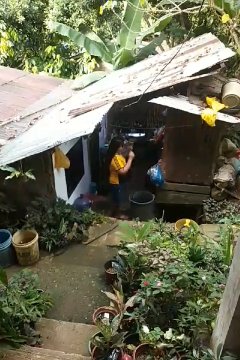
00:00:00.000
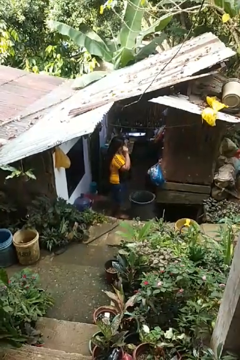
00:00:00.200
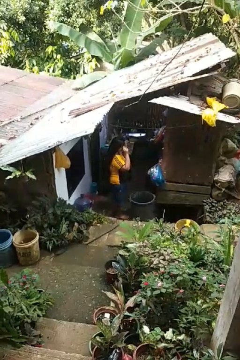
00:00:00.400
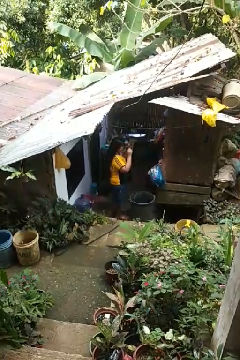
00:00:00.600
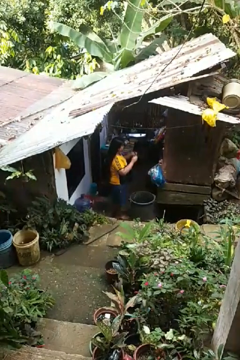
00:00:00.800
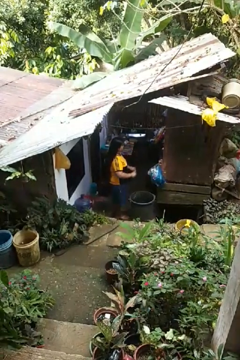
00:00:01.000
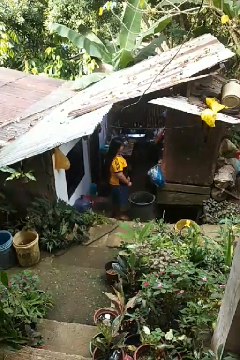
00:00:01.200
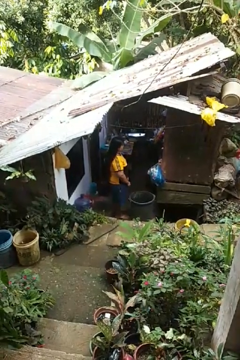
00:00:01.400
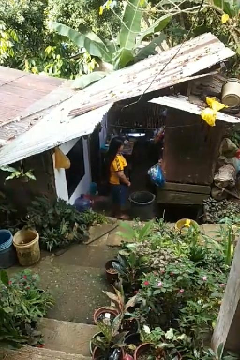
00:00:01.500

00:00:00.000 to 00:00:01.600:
person takes off sunglasses

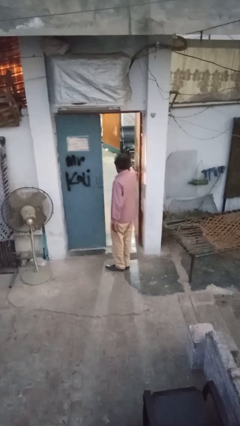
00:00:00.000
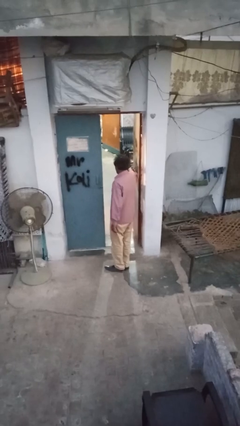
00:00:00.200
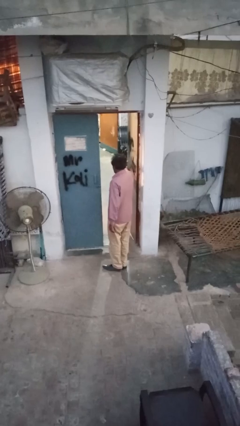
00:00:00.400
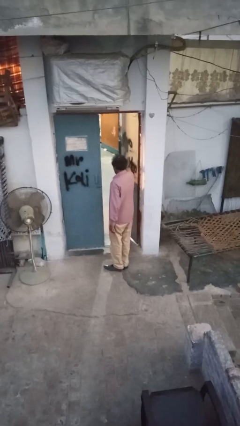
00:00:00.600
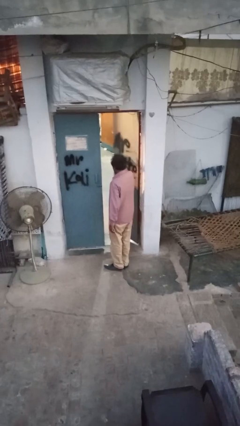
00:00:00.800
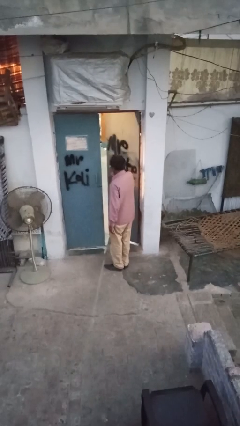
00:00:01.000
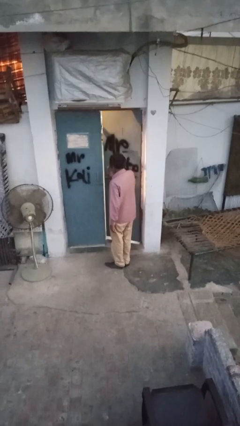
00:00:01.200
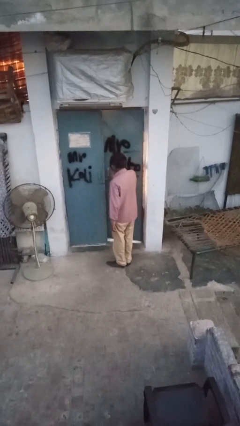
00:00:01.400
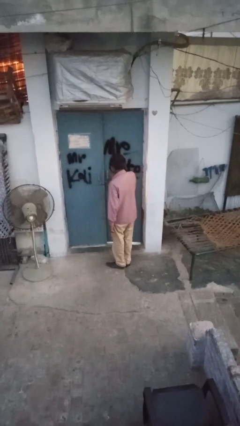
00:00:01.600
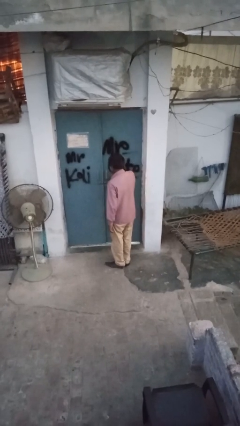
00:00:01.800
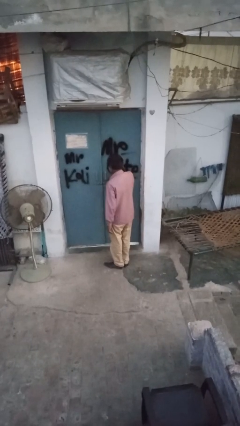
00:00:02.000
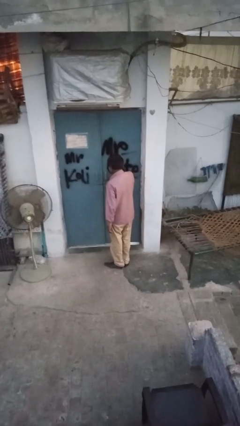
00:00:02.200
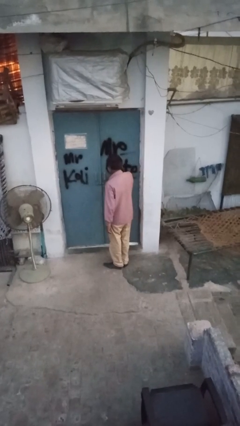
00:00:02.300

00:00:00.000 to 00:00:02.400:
person closes facility door

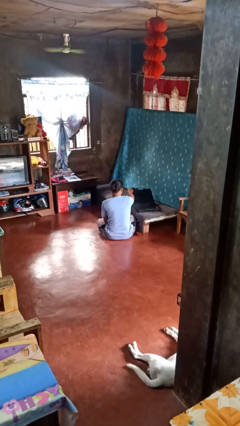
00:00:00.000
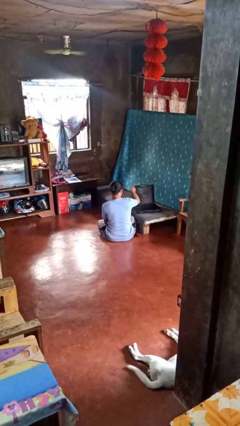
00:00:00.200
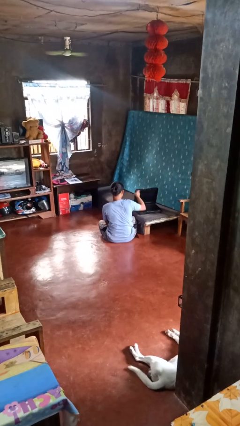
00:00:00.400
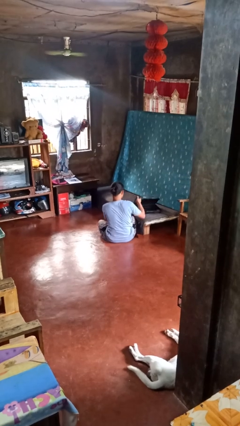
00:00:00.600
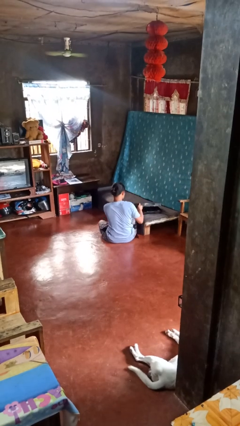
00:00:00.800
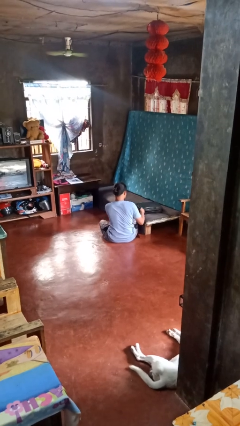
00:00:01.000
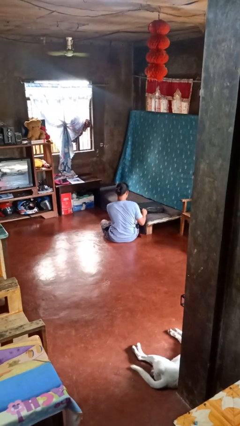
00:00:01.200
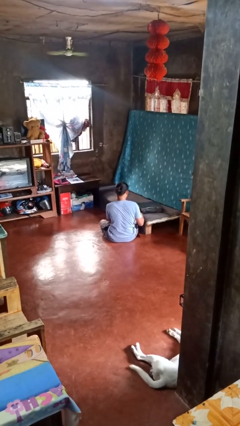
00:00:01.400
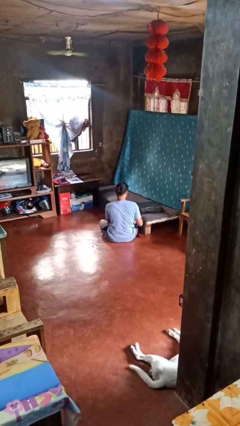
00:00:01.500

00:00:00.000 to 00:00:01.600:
person closes suitcase

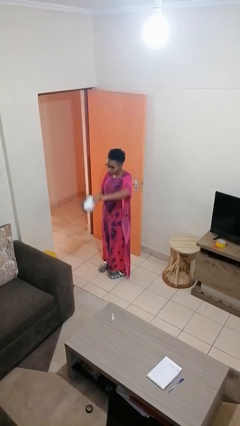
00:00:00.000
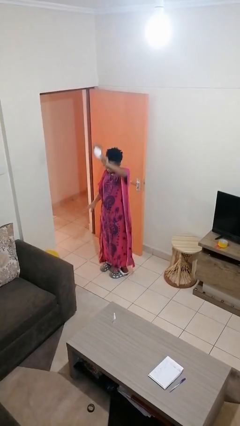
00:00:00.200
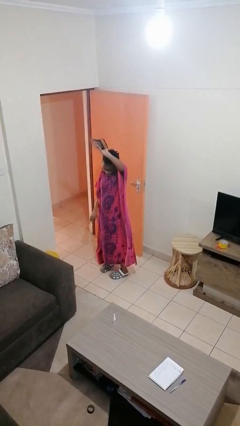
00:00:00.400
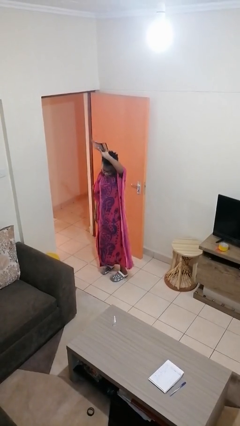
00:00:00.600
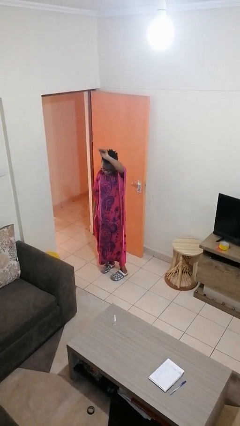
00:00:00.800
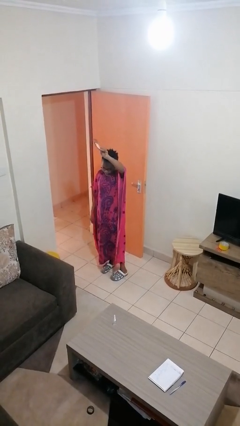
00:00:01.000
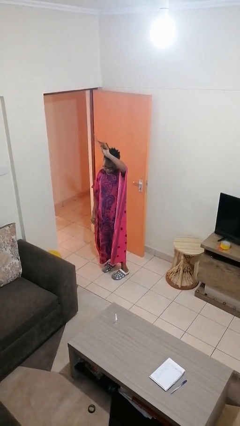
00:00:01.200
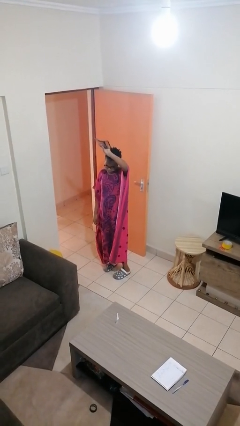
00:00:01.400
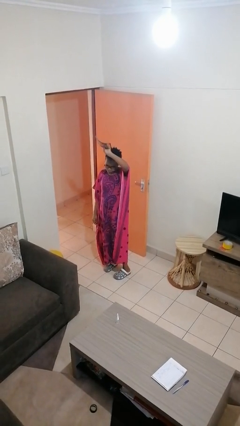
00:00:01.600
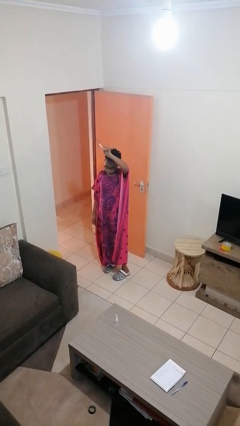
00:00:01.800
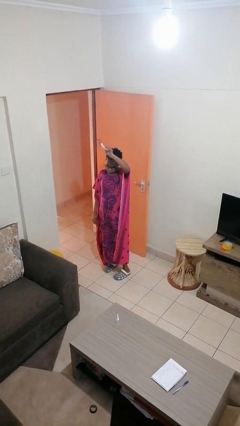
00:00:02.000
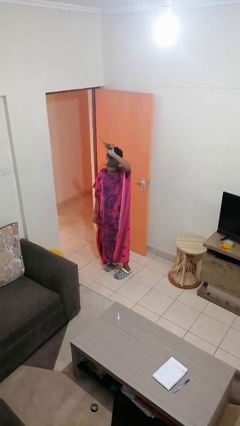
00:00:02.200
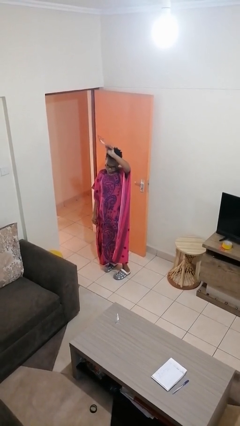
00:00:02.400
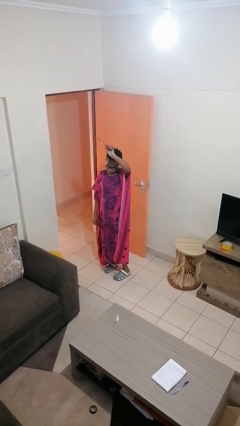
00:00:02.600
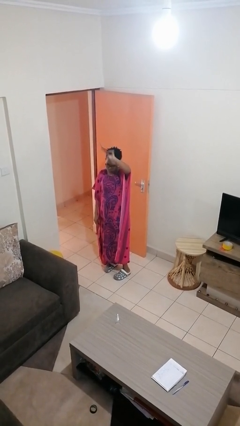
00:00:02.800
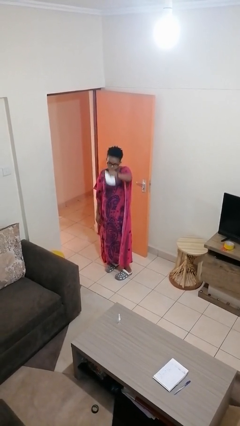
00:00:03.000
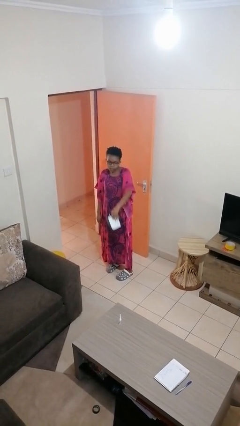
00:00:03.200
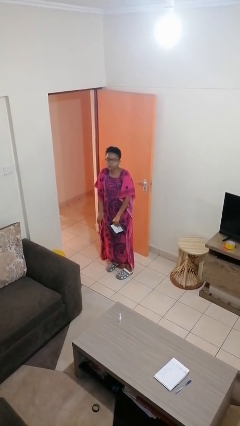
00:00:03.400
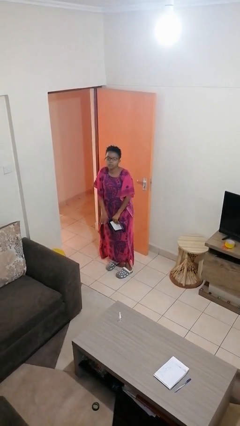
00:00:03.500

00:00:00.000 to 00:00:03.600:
person holds object above head

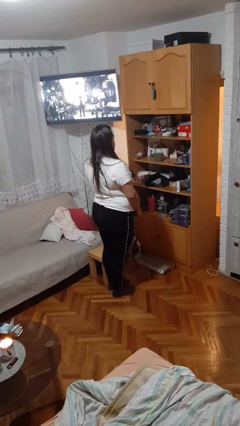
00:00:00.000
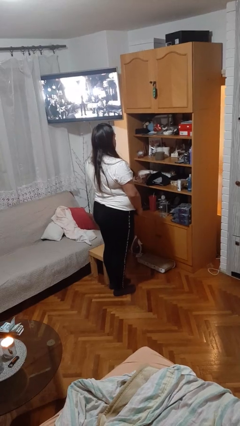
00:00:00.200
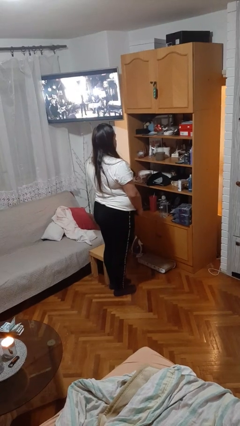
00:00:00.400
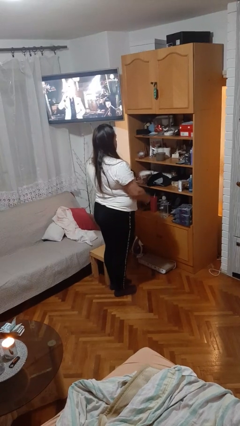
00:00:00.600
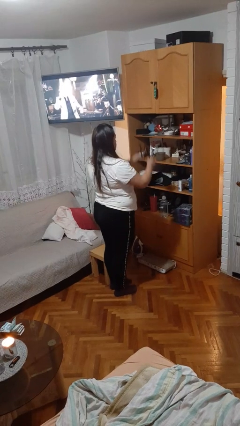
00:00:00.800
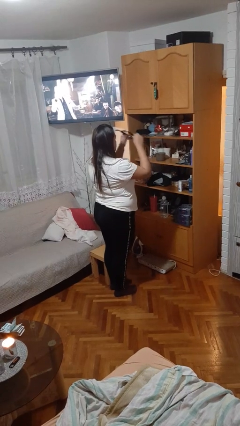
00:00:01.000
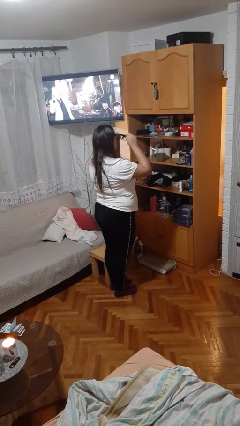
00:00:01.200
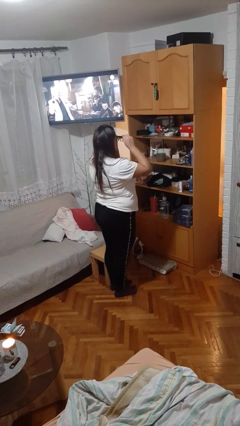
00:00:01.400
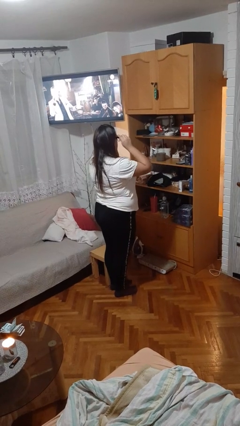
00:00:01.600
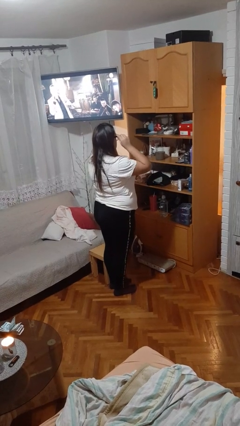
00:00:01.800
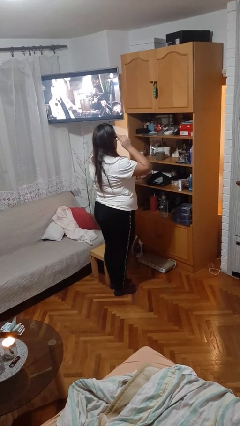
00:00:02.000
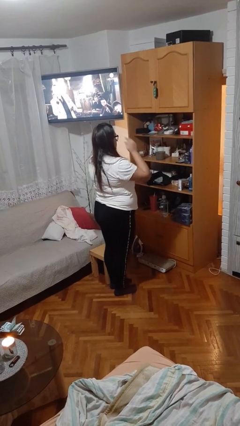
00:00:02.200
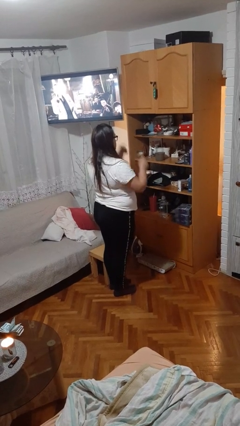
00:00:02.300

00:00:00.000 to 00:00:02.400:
person puts on glasses

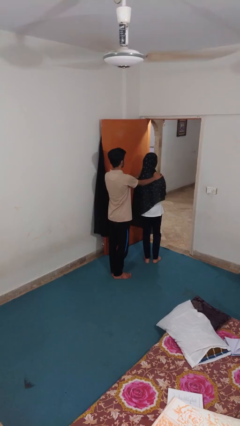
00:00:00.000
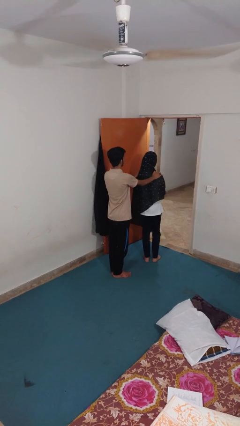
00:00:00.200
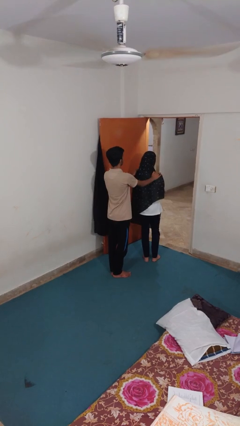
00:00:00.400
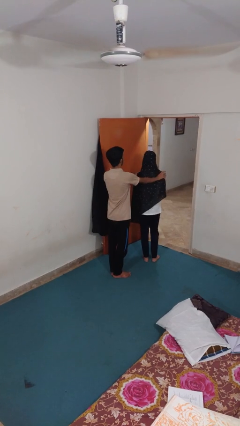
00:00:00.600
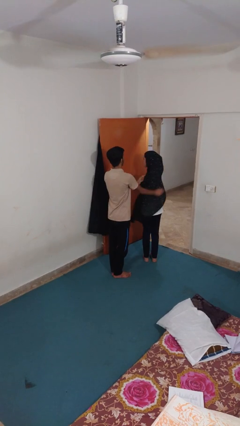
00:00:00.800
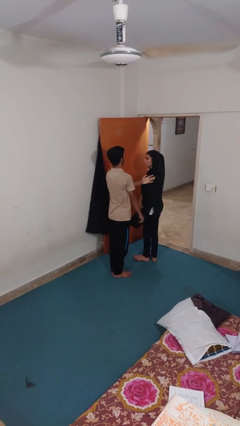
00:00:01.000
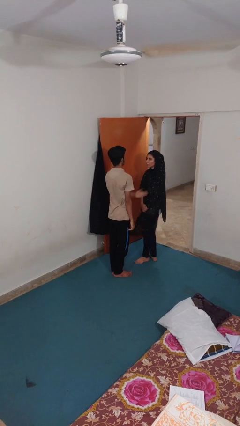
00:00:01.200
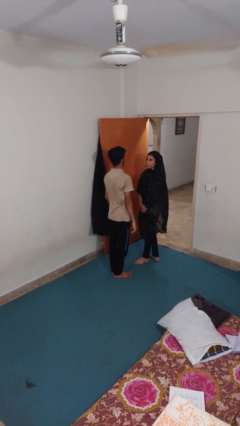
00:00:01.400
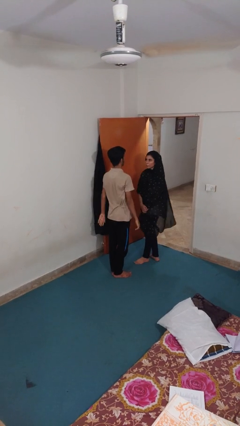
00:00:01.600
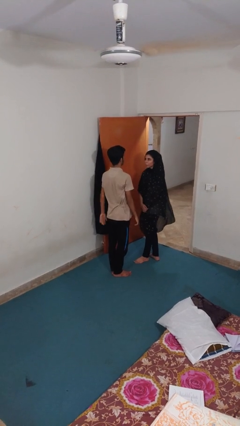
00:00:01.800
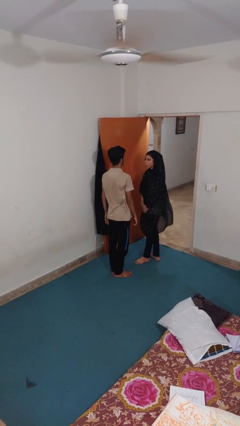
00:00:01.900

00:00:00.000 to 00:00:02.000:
person spins person around

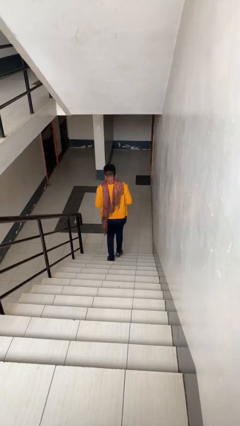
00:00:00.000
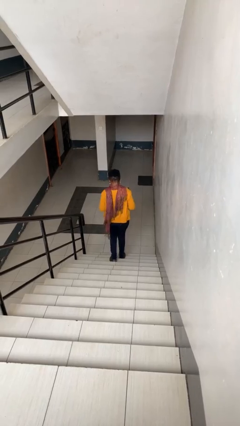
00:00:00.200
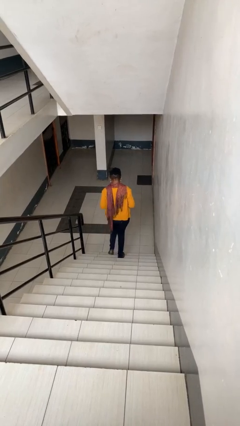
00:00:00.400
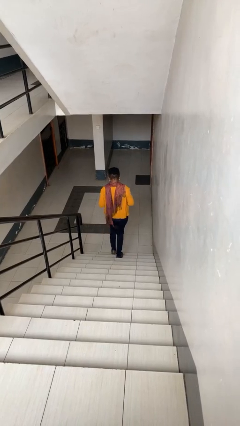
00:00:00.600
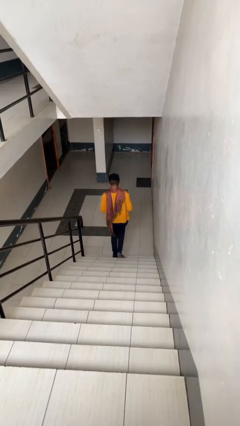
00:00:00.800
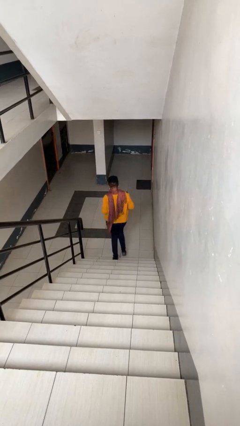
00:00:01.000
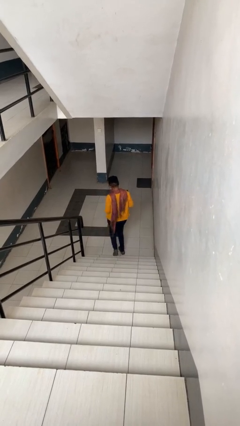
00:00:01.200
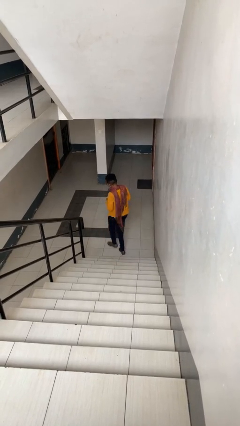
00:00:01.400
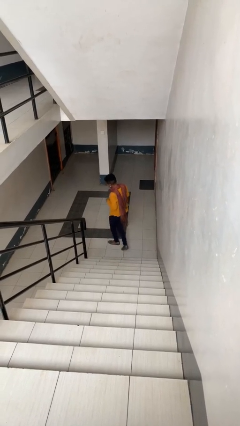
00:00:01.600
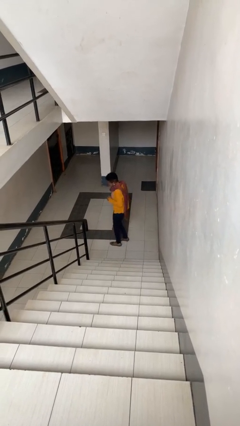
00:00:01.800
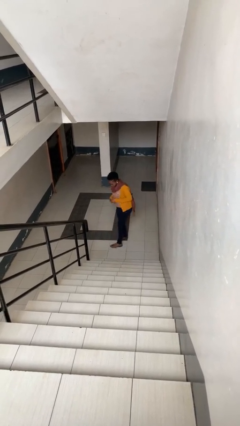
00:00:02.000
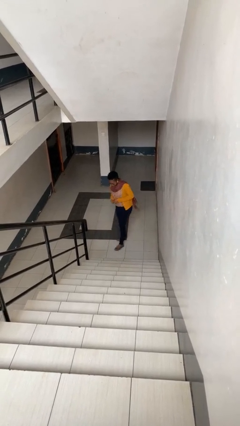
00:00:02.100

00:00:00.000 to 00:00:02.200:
person climbs down stairs

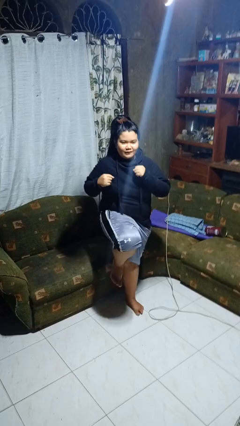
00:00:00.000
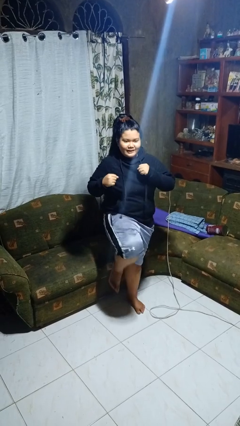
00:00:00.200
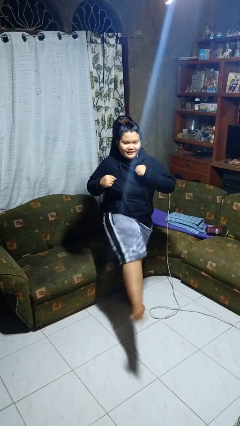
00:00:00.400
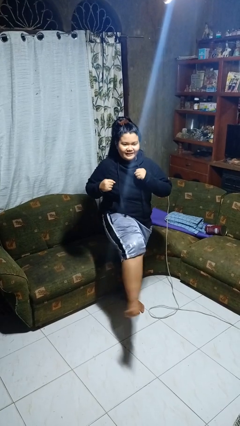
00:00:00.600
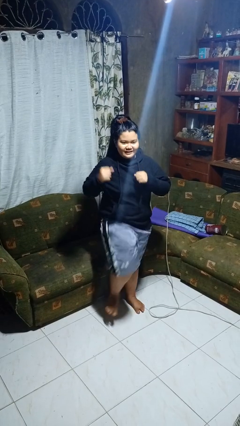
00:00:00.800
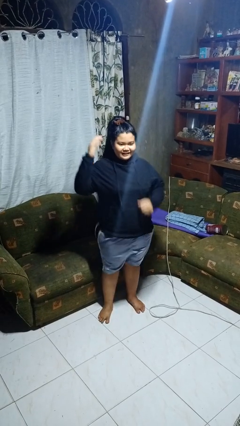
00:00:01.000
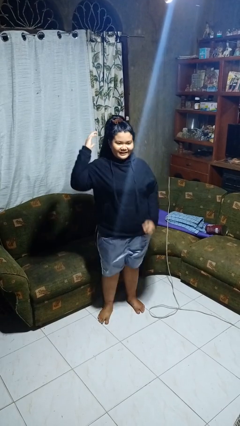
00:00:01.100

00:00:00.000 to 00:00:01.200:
person karate kicks

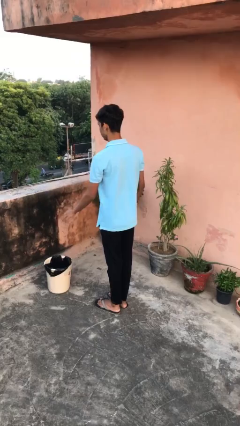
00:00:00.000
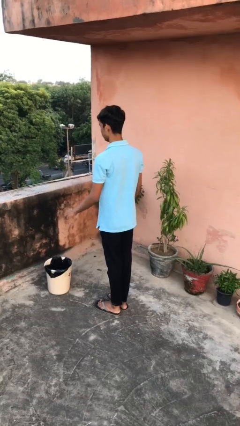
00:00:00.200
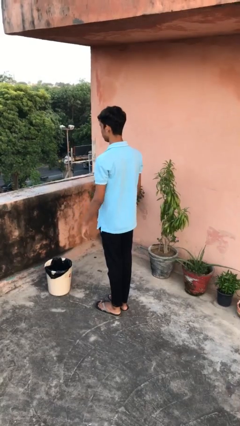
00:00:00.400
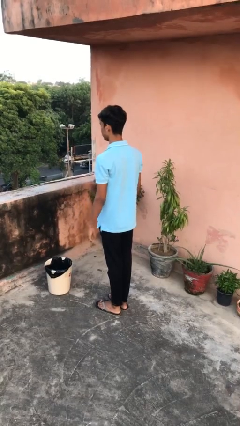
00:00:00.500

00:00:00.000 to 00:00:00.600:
person discards trash
